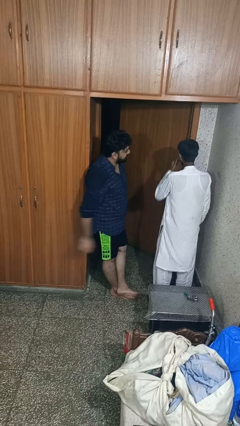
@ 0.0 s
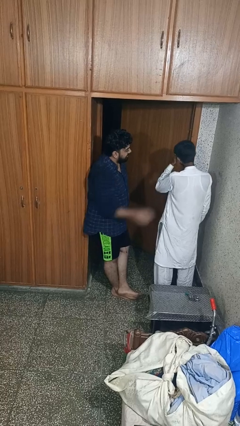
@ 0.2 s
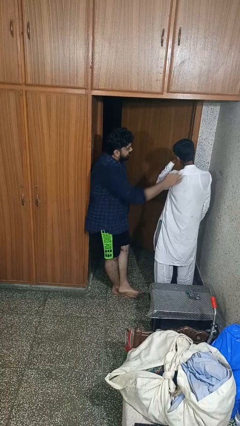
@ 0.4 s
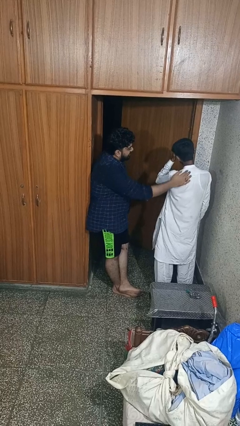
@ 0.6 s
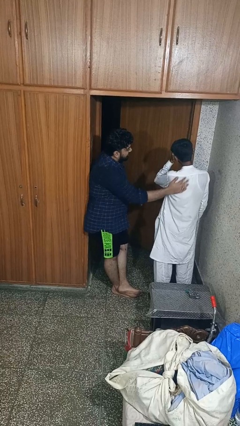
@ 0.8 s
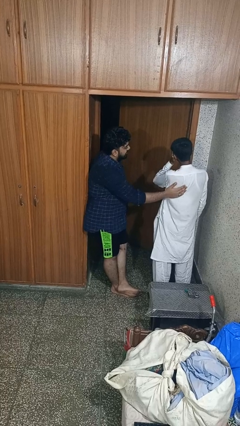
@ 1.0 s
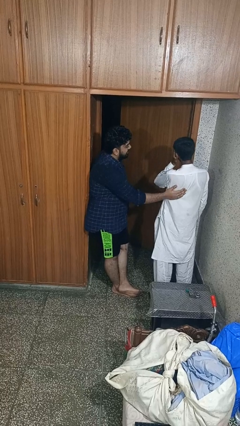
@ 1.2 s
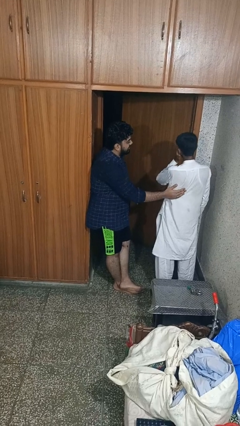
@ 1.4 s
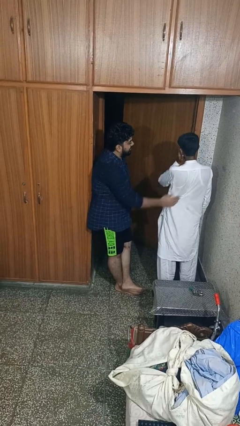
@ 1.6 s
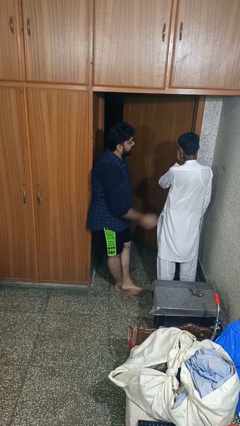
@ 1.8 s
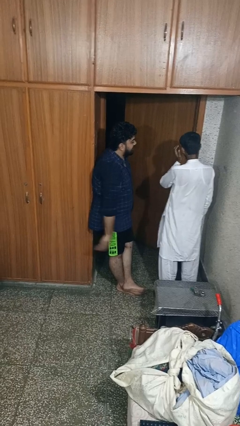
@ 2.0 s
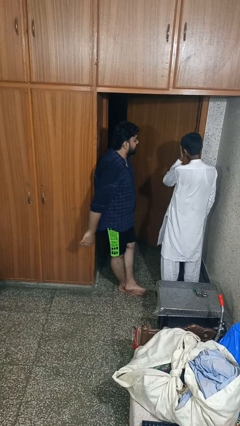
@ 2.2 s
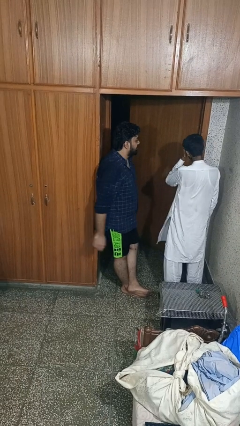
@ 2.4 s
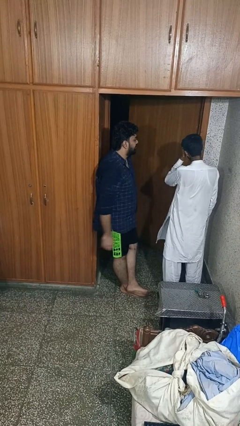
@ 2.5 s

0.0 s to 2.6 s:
person touches back of person

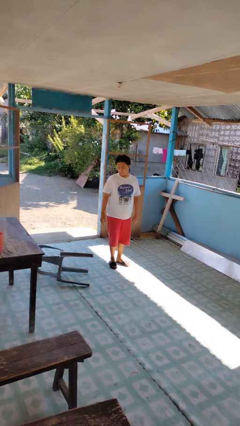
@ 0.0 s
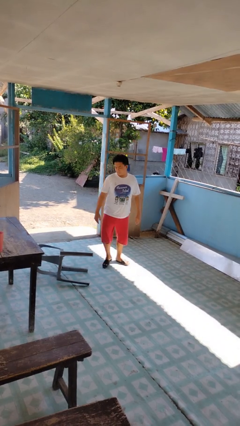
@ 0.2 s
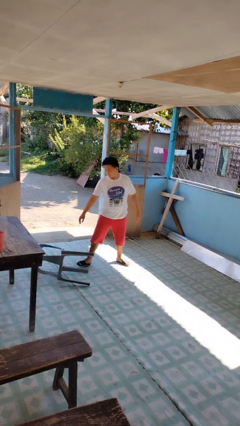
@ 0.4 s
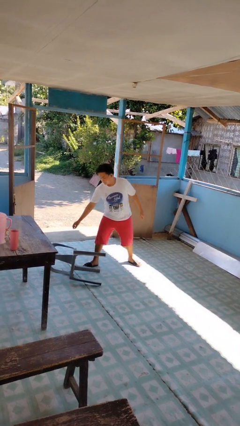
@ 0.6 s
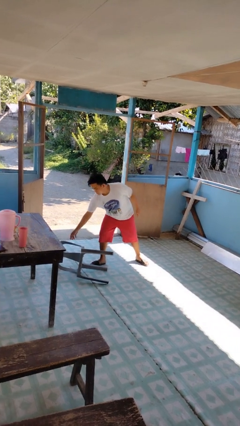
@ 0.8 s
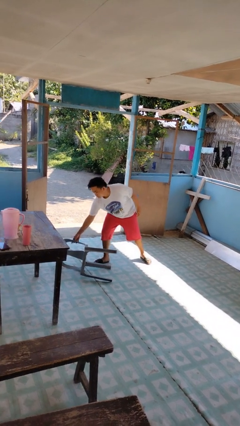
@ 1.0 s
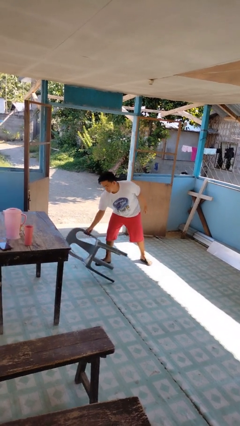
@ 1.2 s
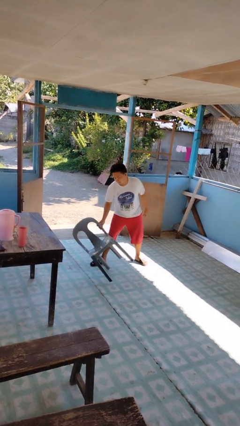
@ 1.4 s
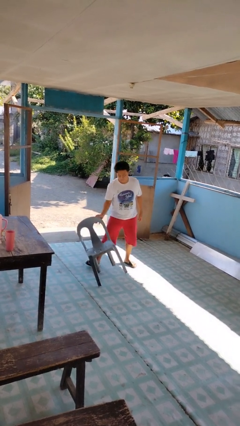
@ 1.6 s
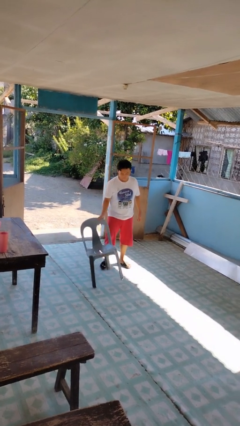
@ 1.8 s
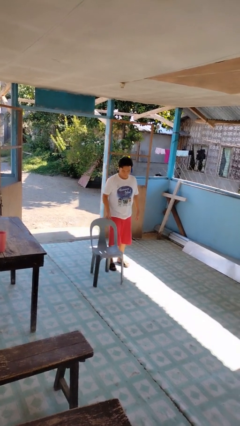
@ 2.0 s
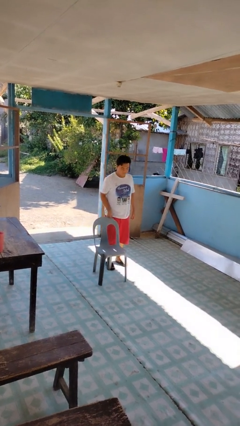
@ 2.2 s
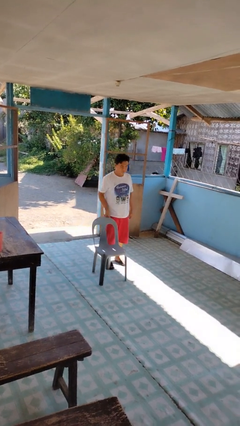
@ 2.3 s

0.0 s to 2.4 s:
person sets upright furniture

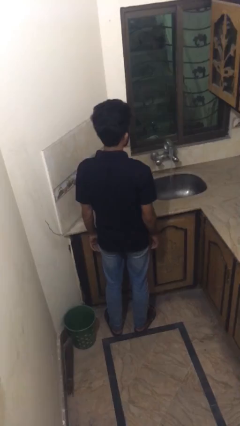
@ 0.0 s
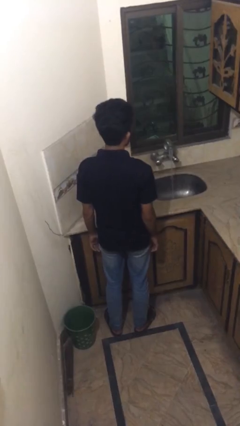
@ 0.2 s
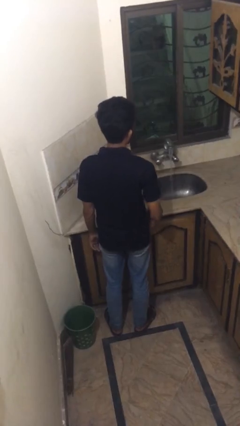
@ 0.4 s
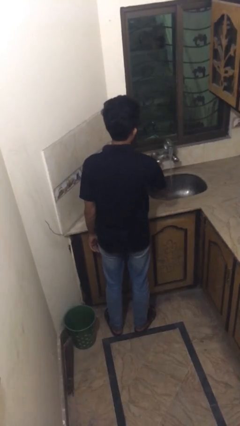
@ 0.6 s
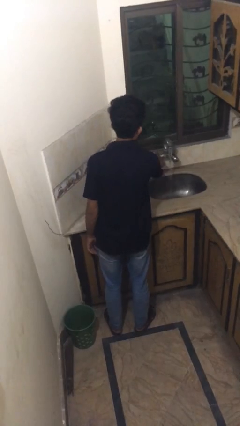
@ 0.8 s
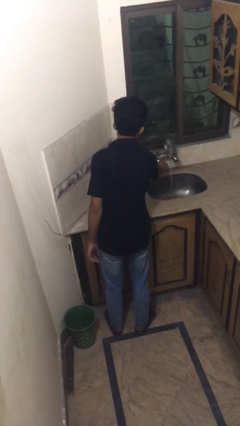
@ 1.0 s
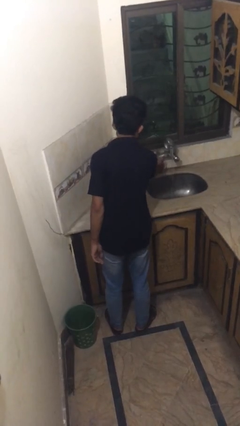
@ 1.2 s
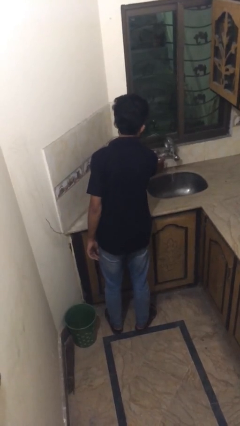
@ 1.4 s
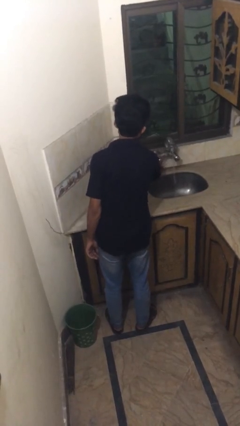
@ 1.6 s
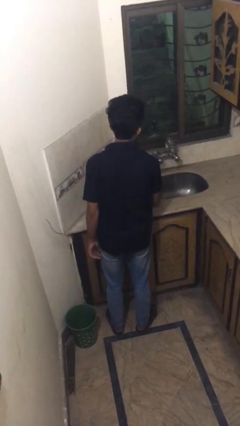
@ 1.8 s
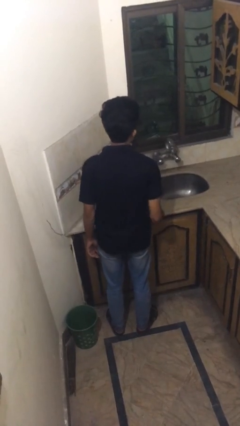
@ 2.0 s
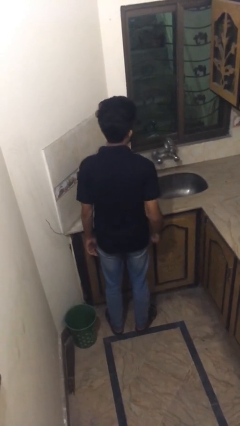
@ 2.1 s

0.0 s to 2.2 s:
person turns off faucet

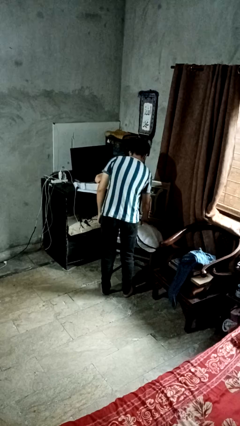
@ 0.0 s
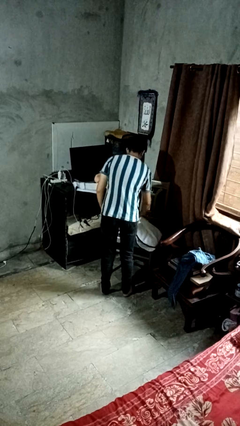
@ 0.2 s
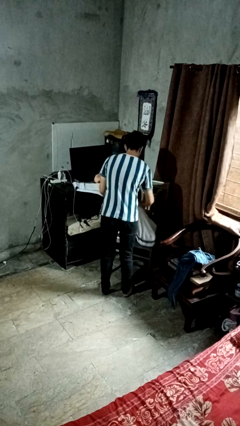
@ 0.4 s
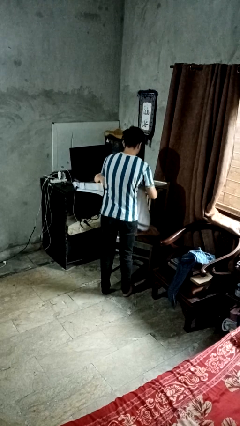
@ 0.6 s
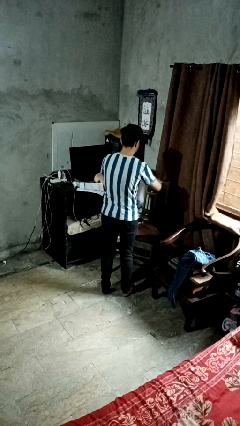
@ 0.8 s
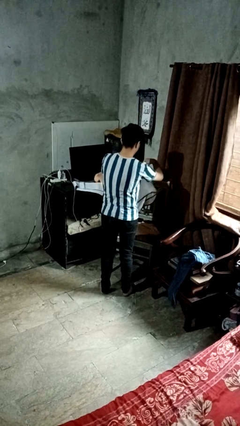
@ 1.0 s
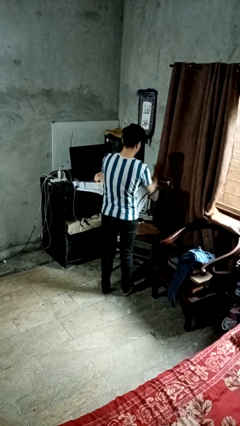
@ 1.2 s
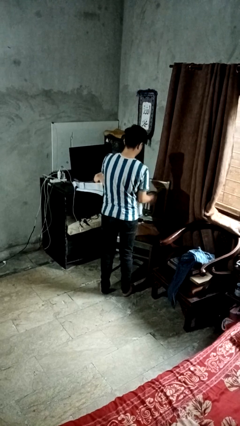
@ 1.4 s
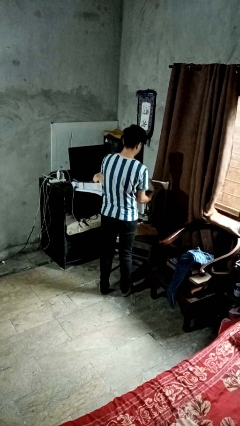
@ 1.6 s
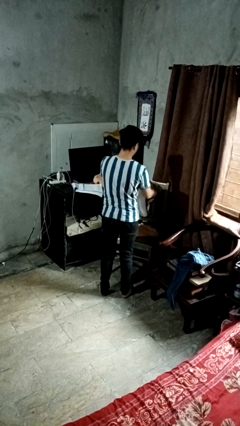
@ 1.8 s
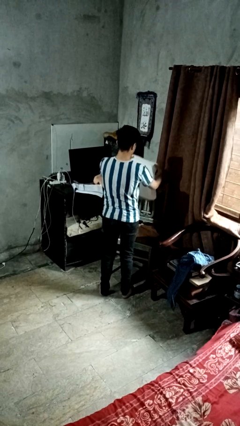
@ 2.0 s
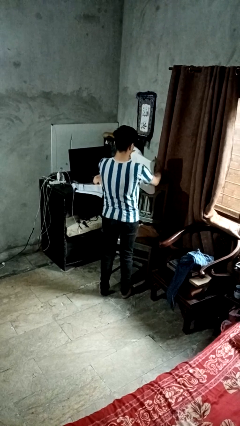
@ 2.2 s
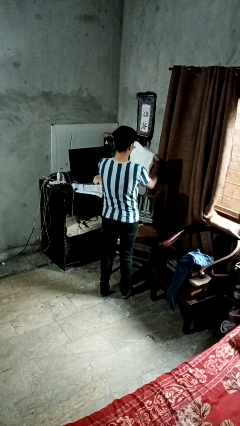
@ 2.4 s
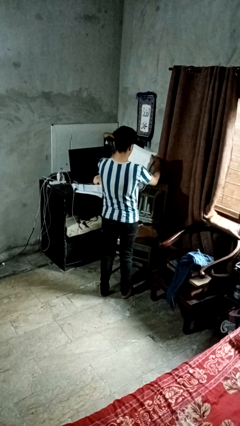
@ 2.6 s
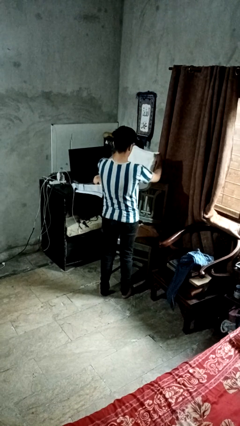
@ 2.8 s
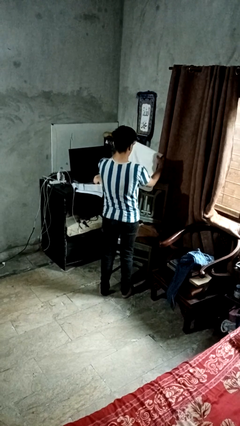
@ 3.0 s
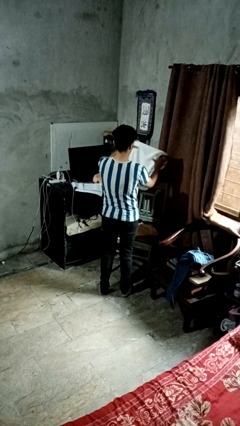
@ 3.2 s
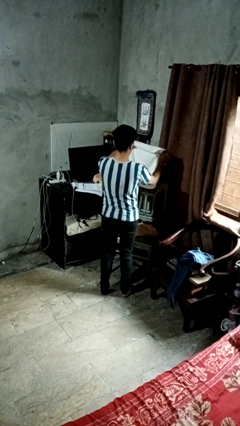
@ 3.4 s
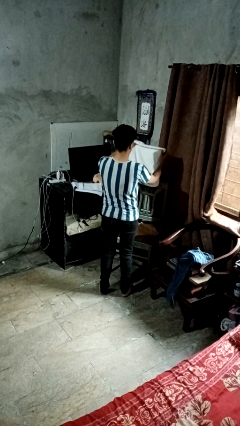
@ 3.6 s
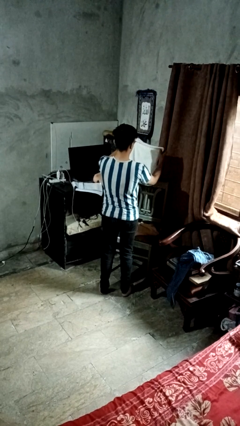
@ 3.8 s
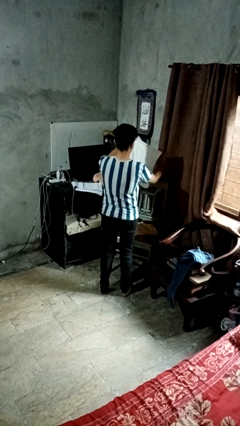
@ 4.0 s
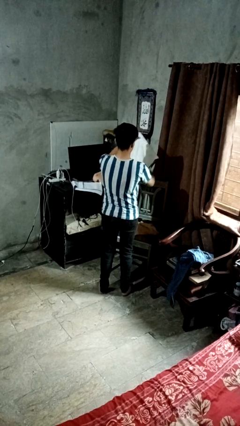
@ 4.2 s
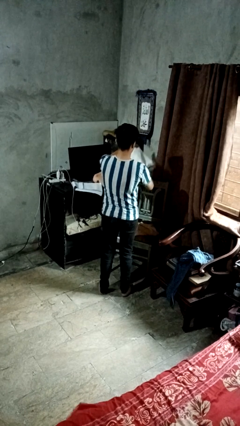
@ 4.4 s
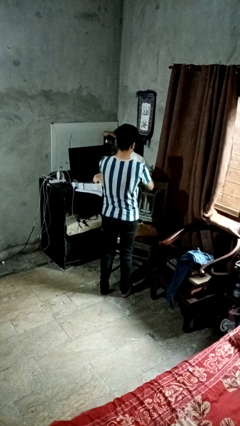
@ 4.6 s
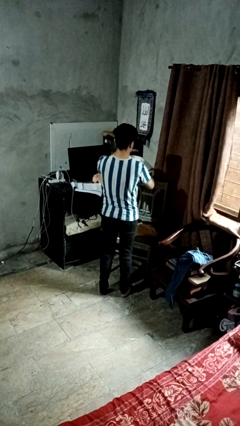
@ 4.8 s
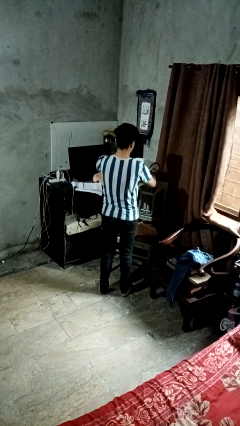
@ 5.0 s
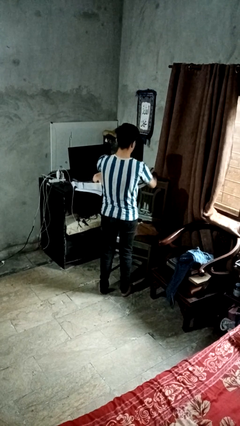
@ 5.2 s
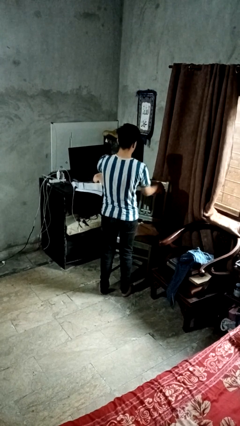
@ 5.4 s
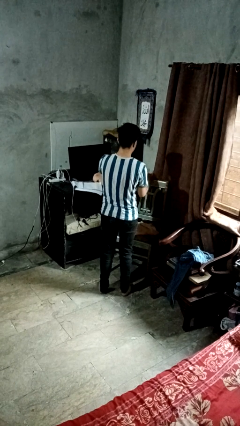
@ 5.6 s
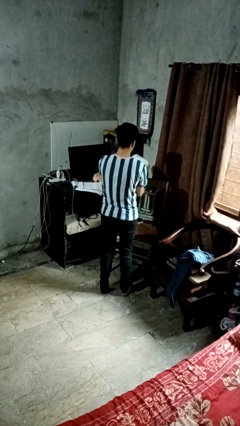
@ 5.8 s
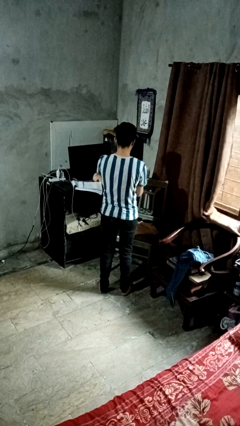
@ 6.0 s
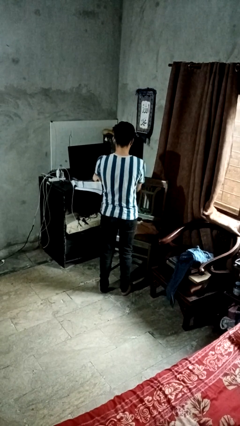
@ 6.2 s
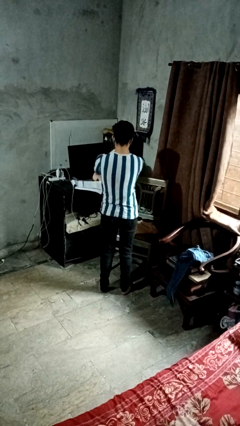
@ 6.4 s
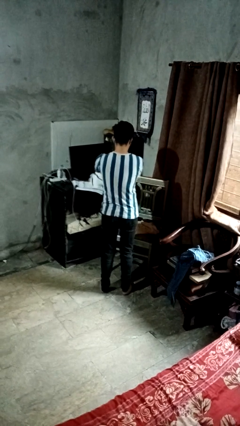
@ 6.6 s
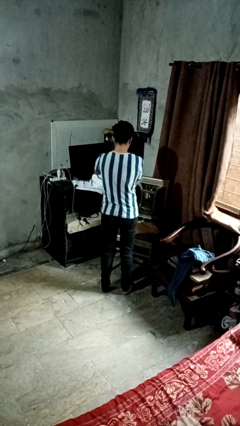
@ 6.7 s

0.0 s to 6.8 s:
person folds towel

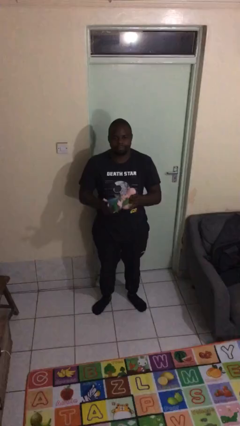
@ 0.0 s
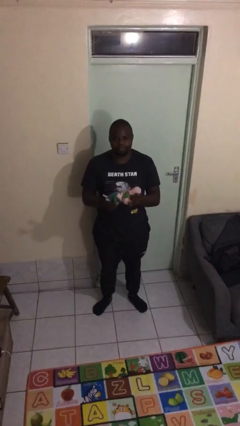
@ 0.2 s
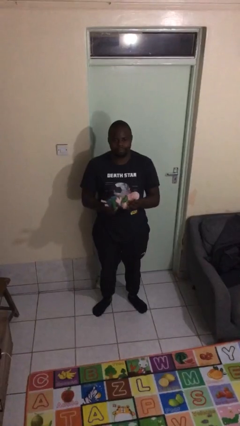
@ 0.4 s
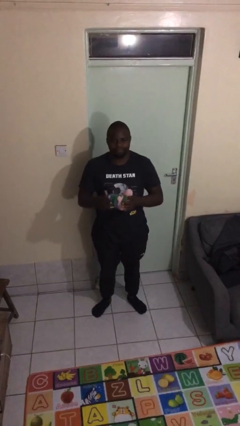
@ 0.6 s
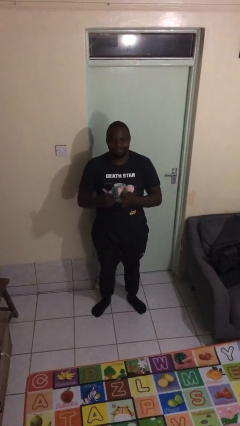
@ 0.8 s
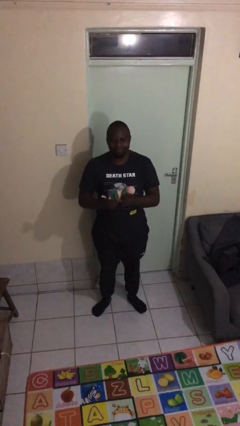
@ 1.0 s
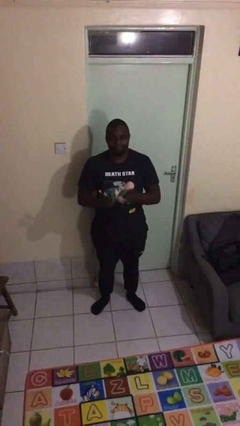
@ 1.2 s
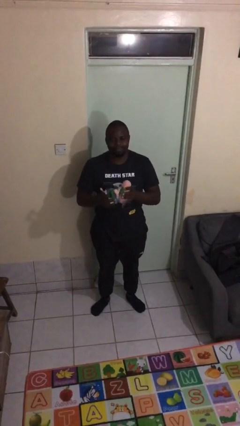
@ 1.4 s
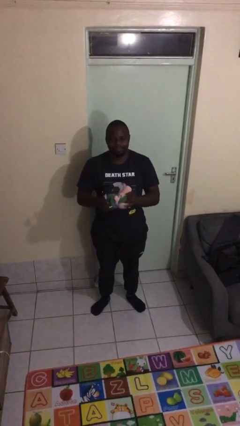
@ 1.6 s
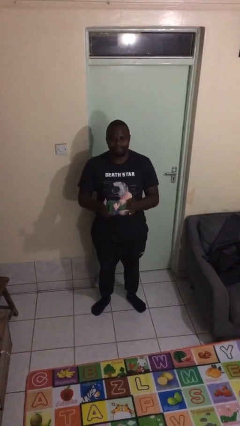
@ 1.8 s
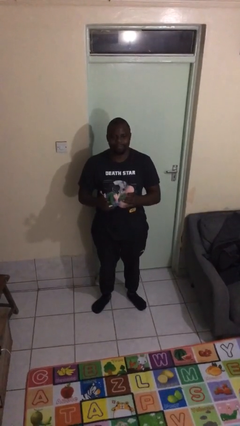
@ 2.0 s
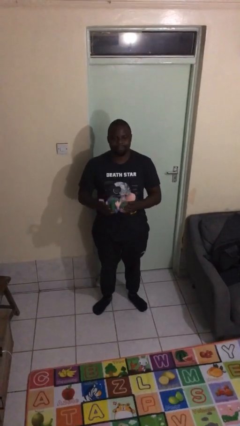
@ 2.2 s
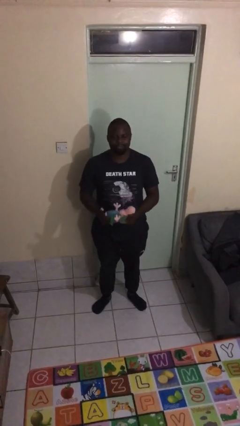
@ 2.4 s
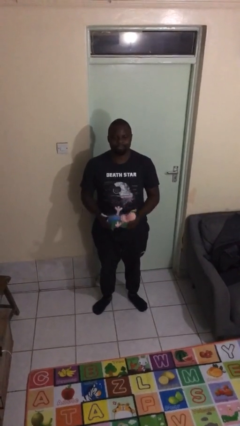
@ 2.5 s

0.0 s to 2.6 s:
person squeezes object

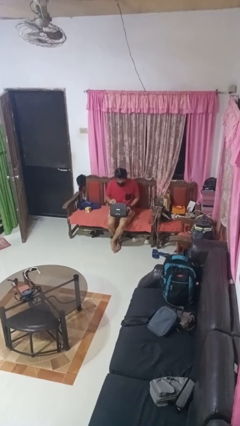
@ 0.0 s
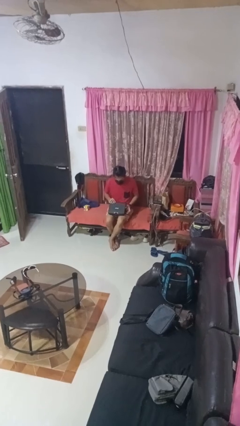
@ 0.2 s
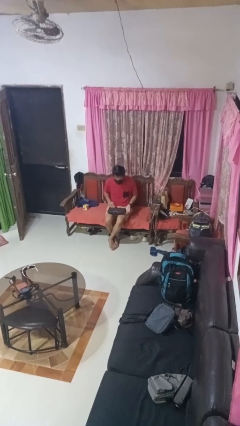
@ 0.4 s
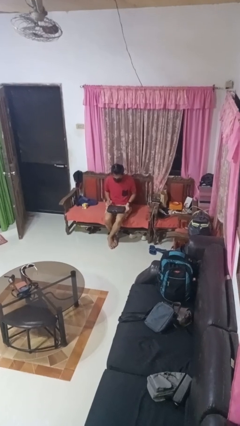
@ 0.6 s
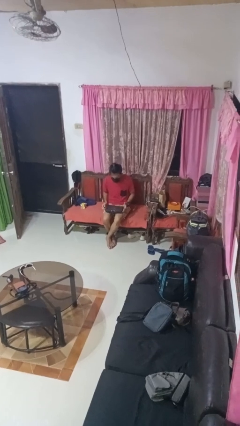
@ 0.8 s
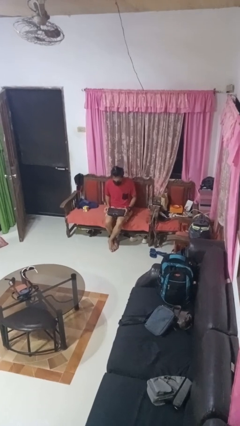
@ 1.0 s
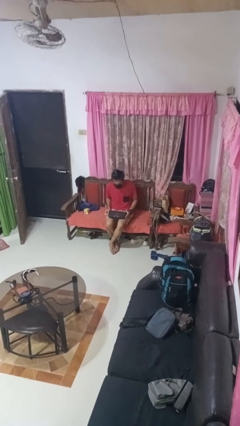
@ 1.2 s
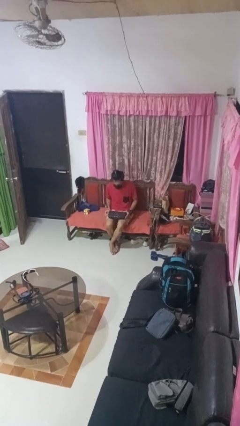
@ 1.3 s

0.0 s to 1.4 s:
person closes laptop
